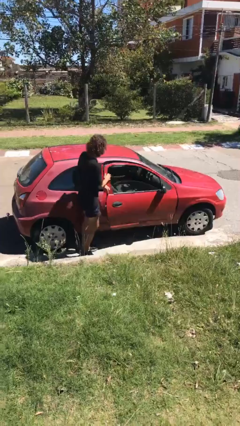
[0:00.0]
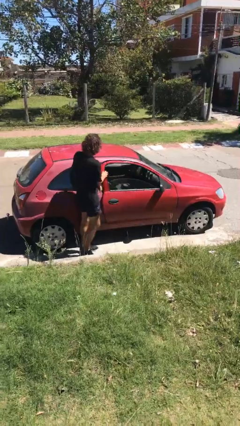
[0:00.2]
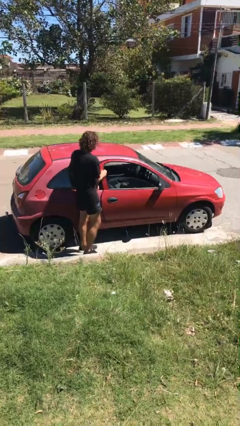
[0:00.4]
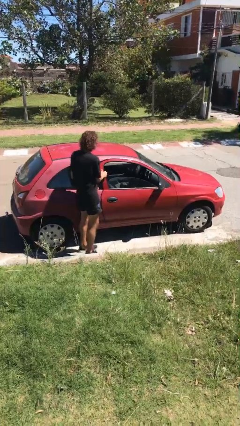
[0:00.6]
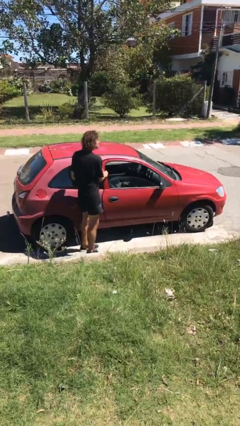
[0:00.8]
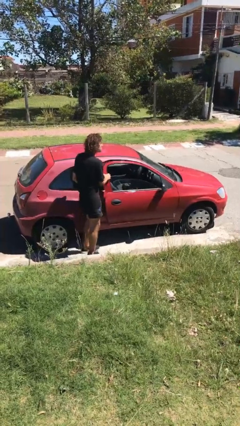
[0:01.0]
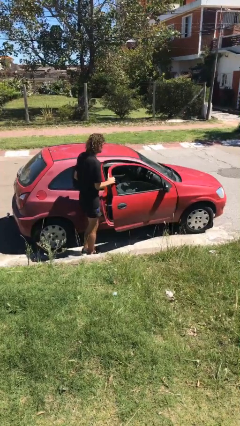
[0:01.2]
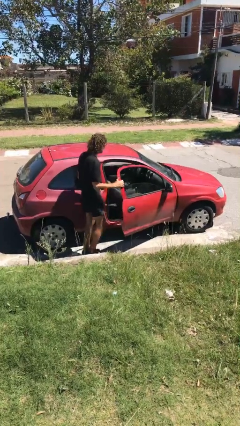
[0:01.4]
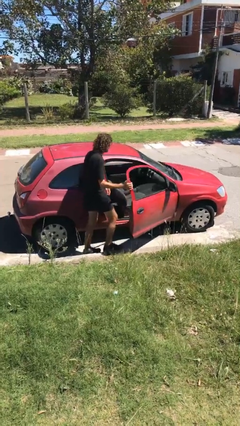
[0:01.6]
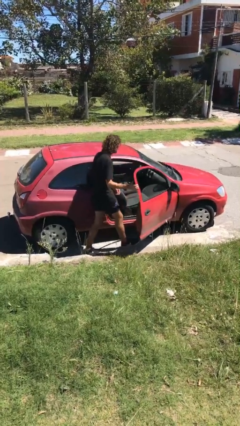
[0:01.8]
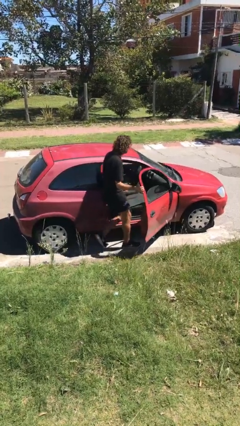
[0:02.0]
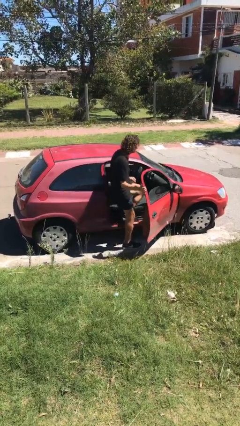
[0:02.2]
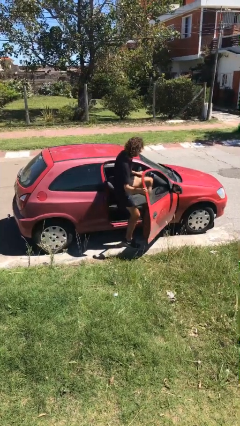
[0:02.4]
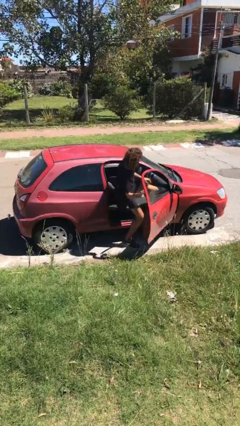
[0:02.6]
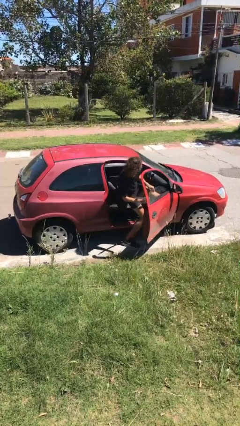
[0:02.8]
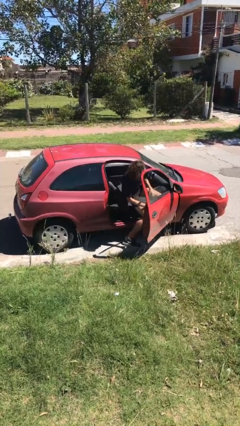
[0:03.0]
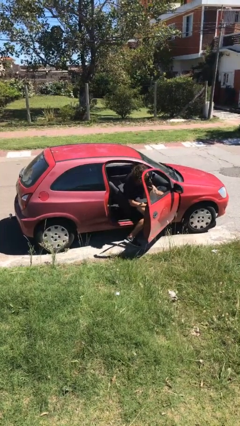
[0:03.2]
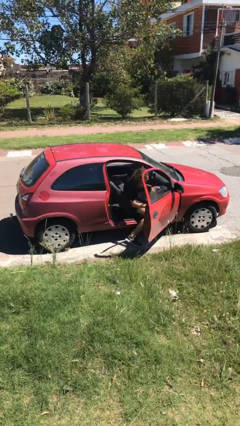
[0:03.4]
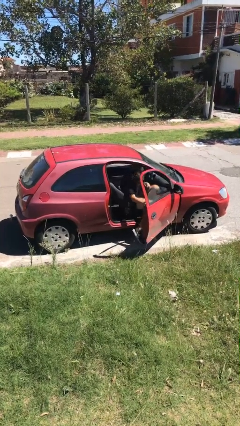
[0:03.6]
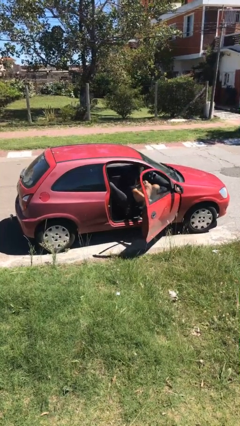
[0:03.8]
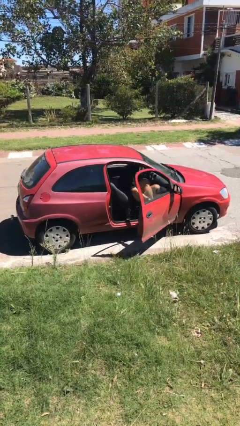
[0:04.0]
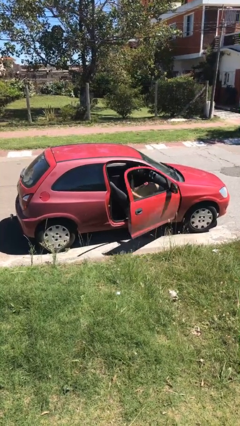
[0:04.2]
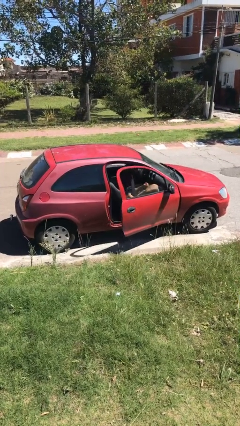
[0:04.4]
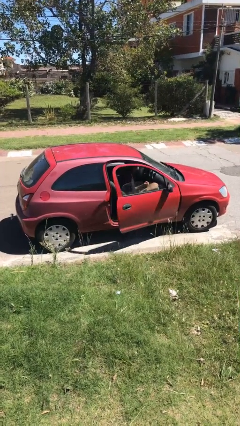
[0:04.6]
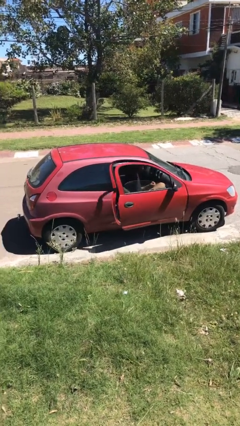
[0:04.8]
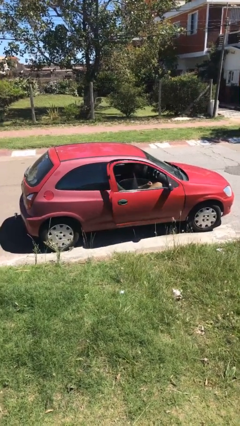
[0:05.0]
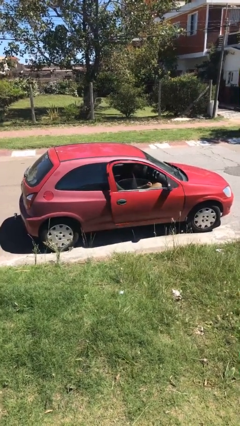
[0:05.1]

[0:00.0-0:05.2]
car picks up person

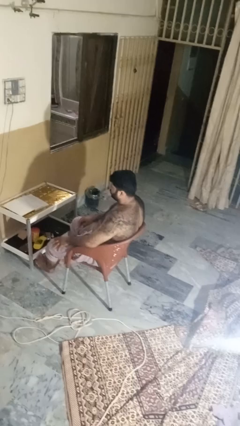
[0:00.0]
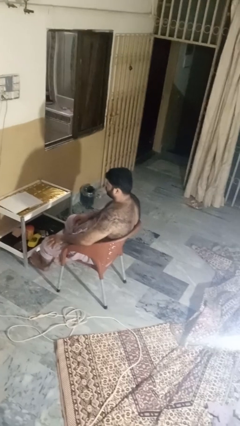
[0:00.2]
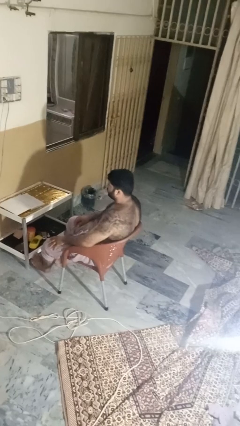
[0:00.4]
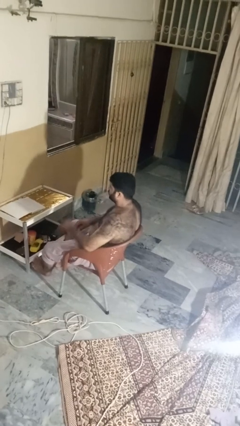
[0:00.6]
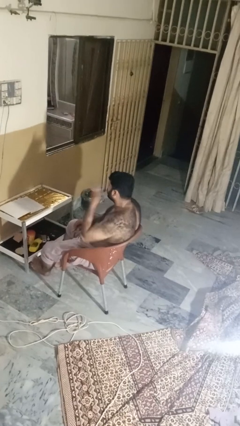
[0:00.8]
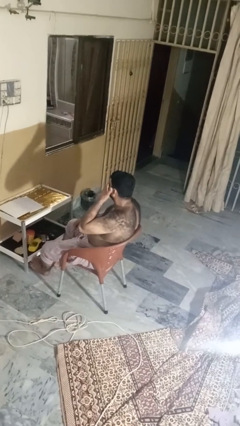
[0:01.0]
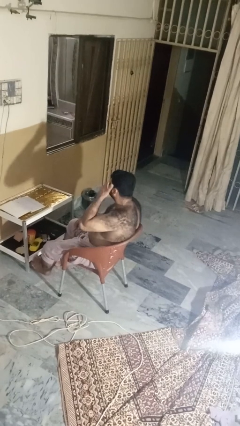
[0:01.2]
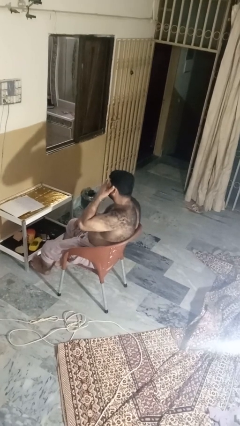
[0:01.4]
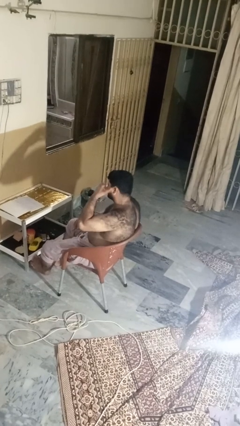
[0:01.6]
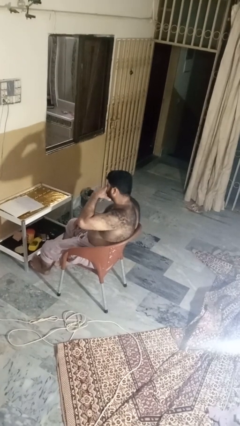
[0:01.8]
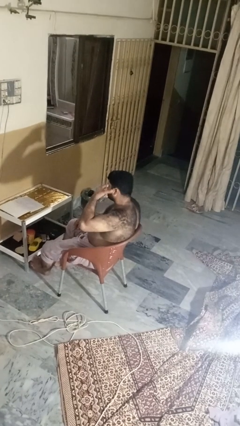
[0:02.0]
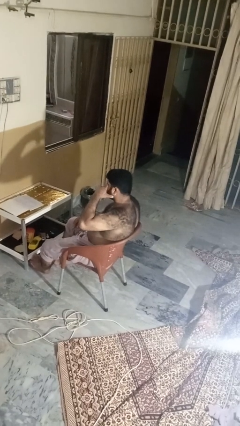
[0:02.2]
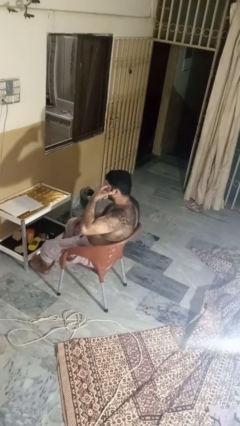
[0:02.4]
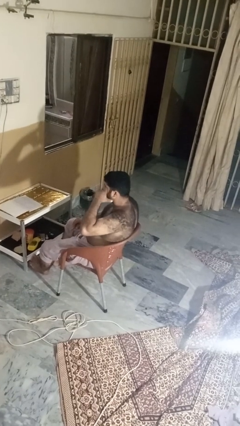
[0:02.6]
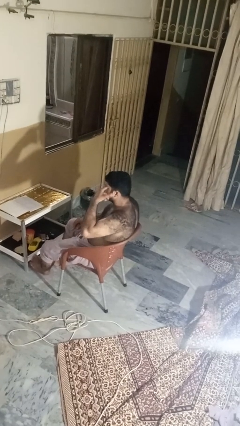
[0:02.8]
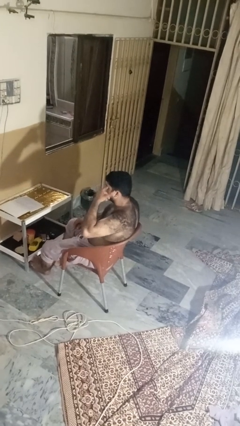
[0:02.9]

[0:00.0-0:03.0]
person rubs eyes

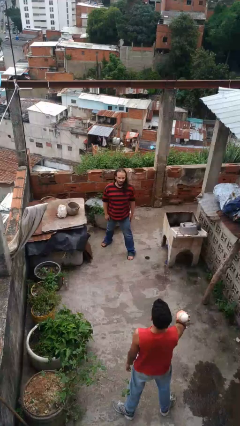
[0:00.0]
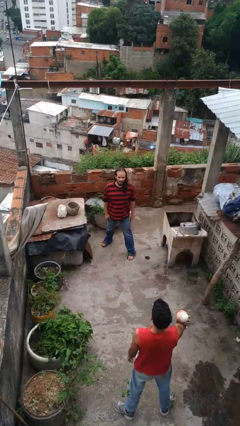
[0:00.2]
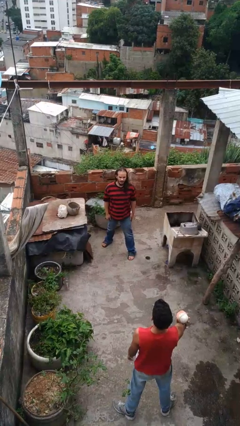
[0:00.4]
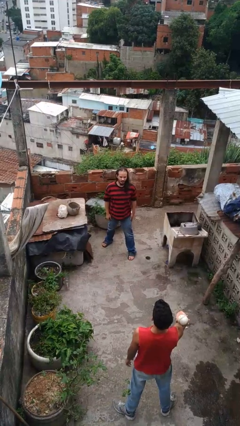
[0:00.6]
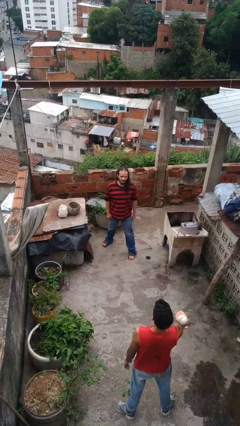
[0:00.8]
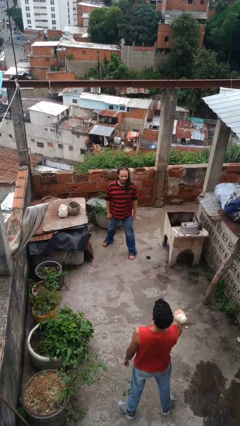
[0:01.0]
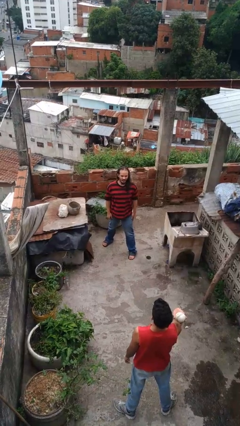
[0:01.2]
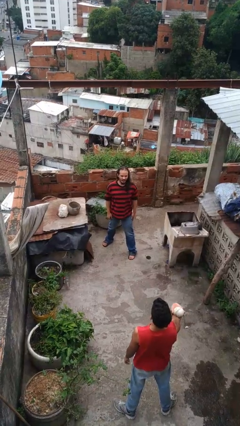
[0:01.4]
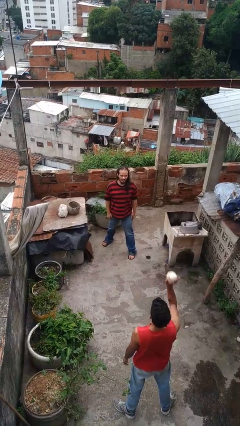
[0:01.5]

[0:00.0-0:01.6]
person catches object from person

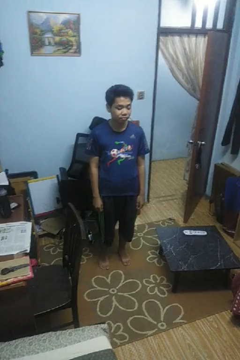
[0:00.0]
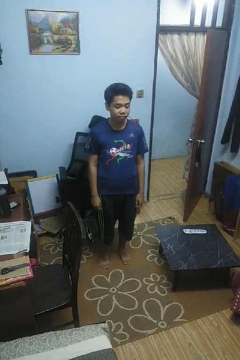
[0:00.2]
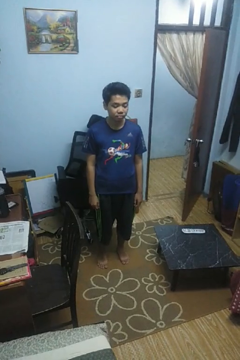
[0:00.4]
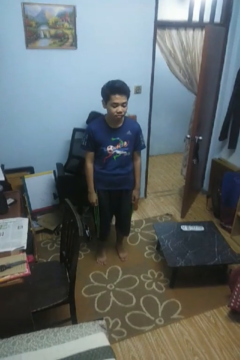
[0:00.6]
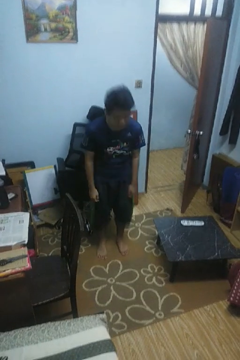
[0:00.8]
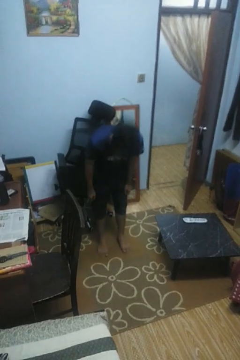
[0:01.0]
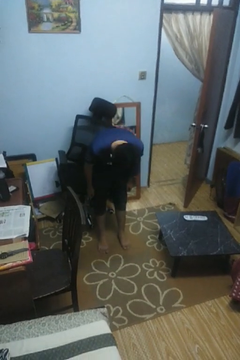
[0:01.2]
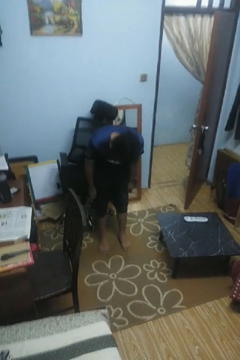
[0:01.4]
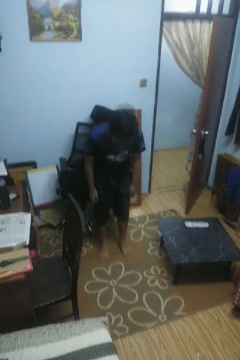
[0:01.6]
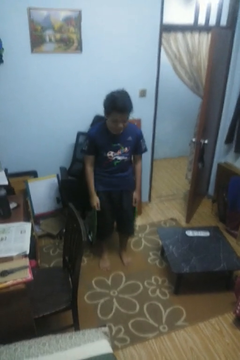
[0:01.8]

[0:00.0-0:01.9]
person bows

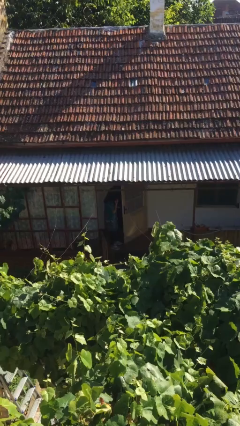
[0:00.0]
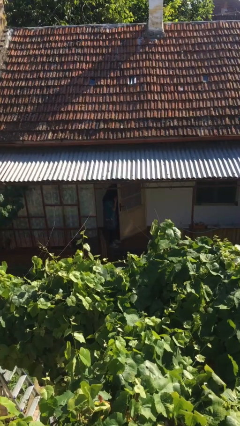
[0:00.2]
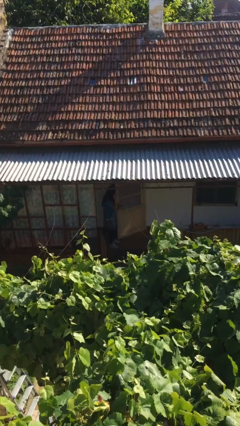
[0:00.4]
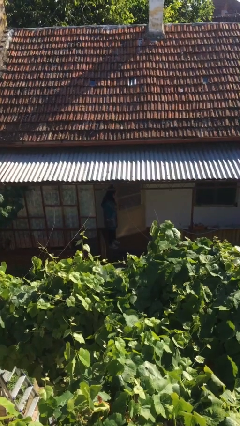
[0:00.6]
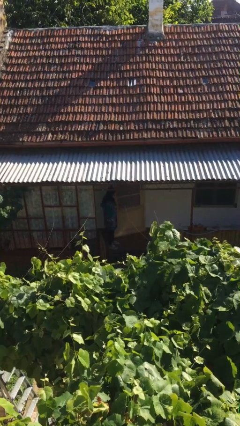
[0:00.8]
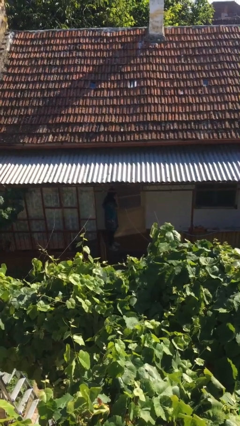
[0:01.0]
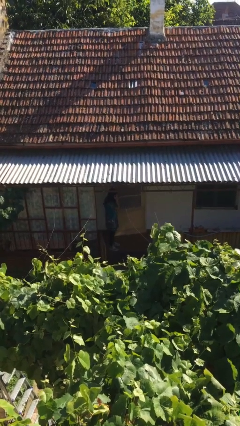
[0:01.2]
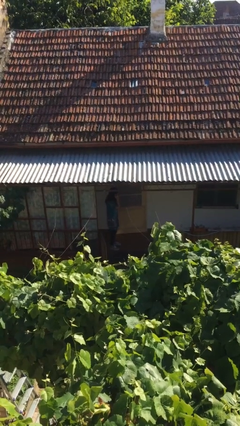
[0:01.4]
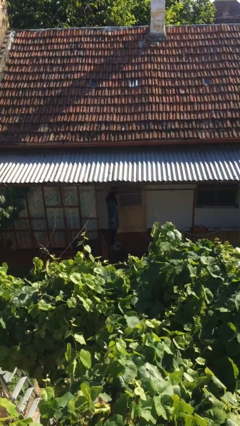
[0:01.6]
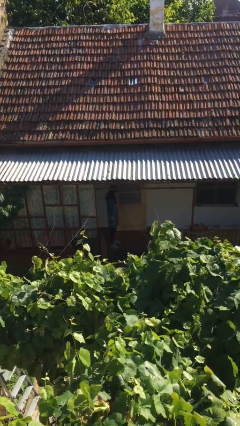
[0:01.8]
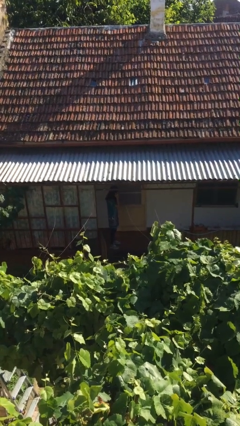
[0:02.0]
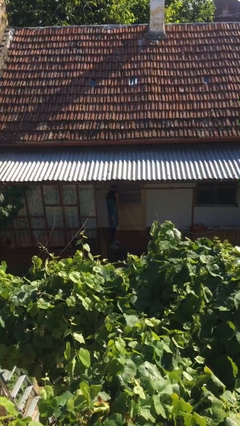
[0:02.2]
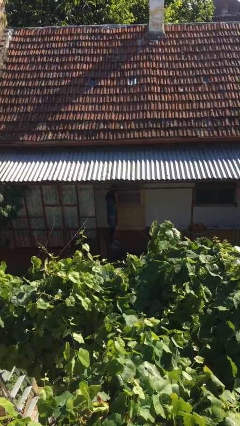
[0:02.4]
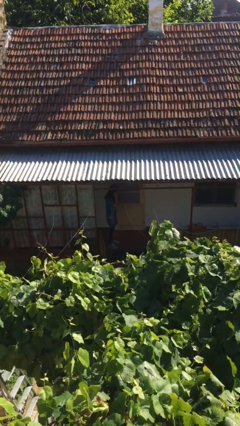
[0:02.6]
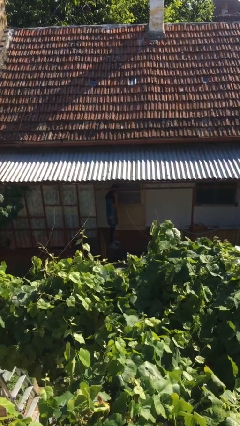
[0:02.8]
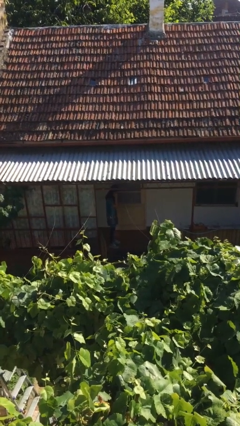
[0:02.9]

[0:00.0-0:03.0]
person closes facility door

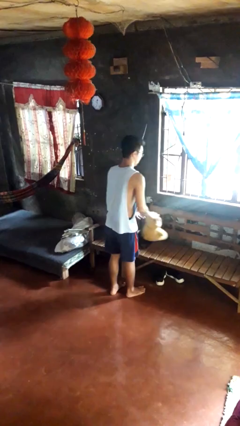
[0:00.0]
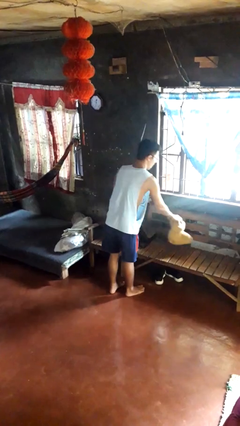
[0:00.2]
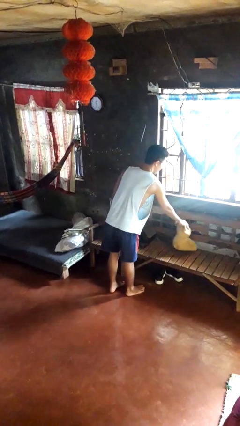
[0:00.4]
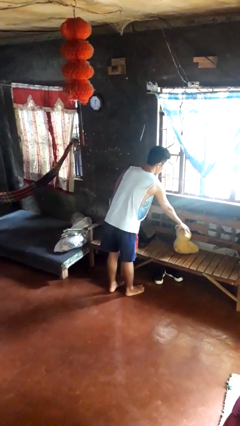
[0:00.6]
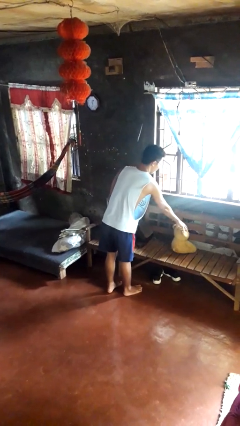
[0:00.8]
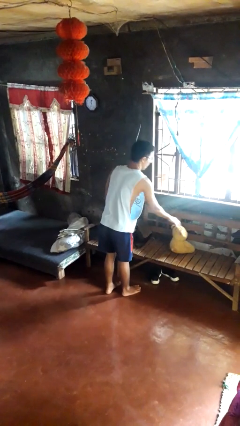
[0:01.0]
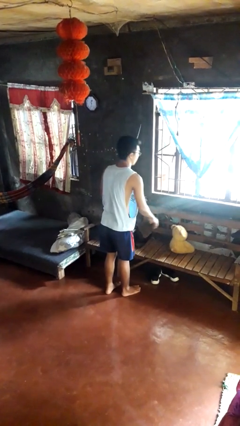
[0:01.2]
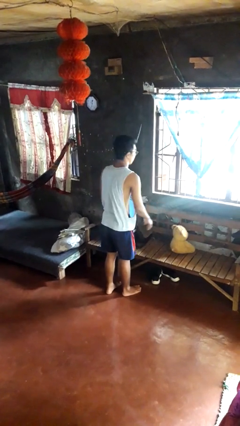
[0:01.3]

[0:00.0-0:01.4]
person puts down object on couch

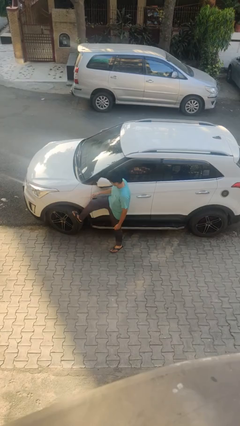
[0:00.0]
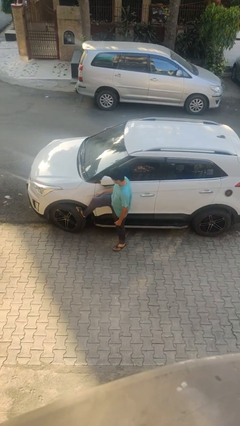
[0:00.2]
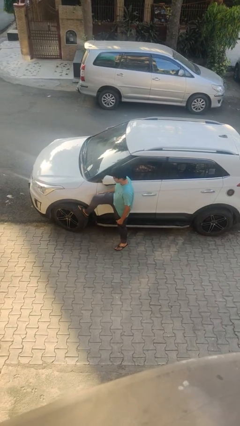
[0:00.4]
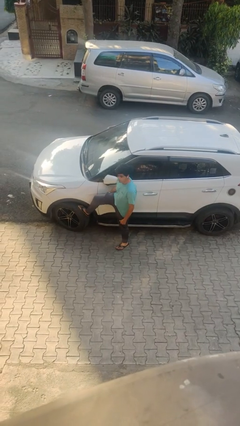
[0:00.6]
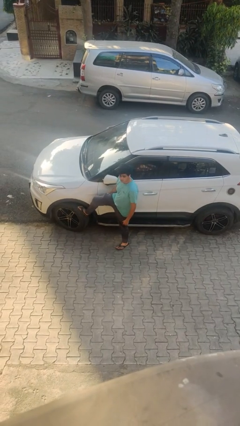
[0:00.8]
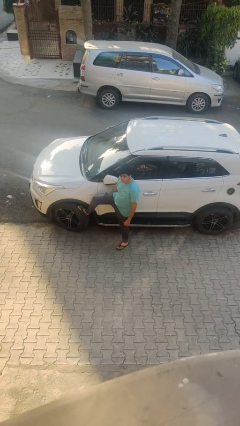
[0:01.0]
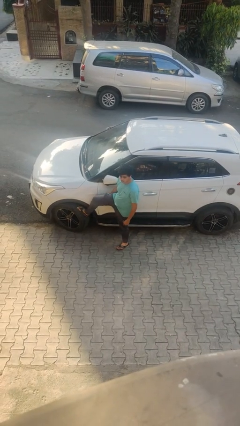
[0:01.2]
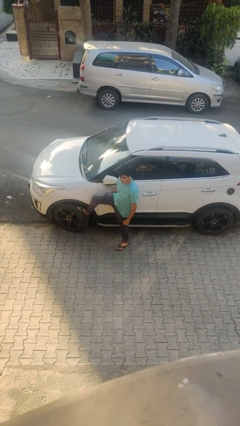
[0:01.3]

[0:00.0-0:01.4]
person kicks car tires

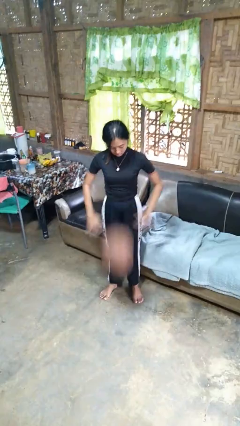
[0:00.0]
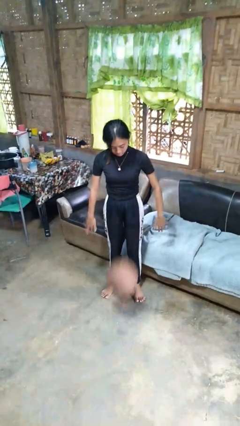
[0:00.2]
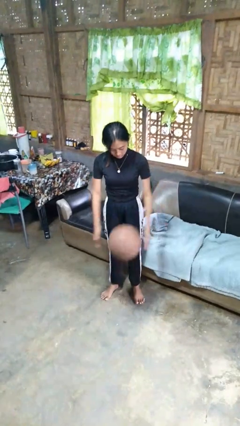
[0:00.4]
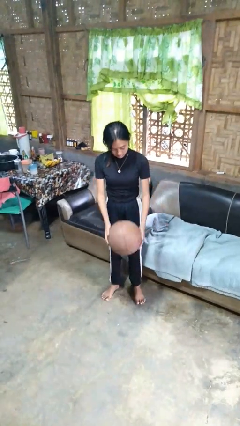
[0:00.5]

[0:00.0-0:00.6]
person bounces ball on floor
